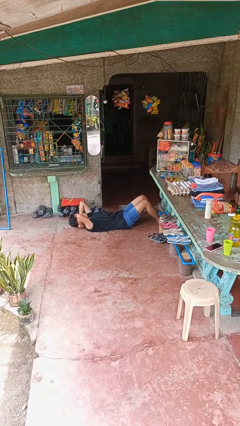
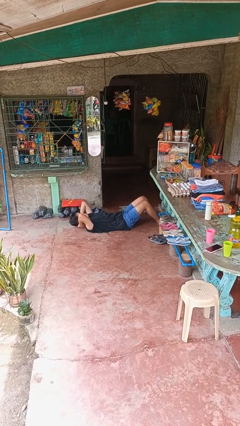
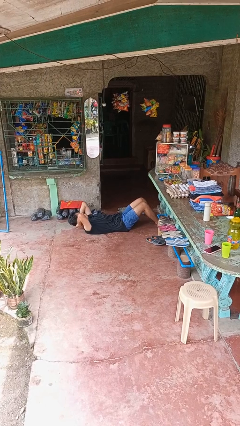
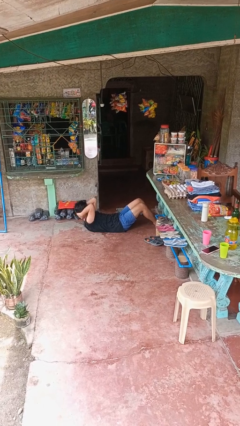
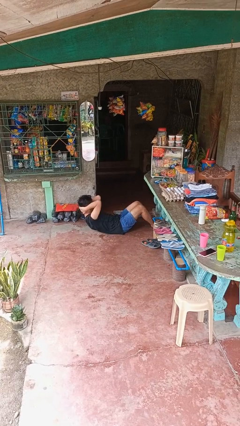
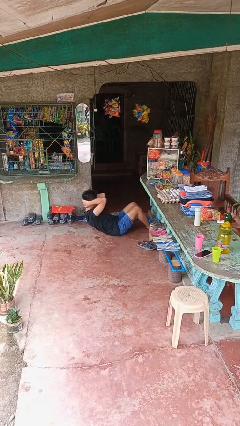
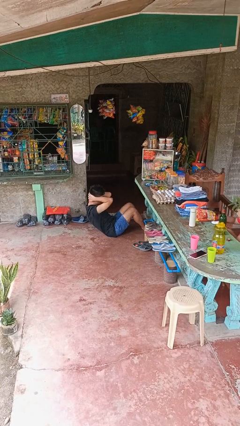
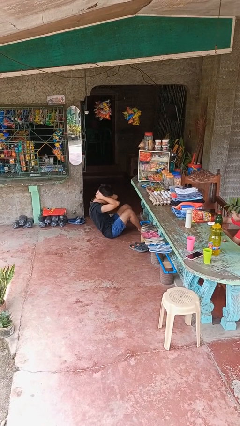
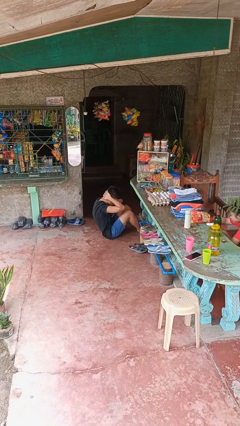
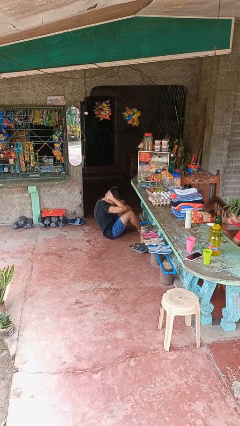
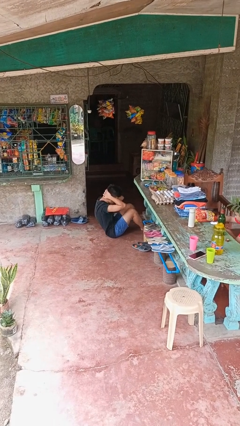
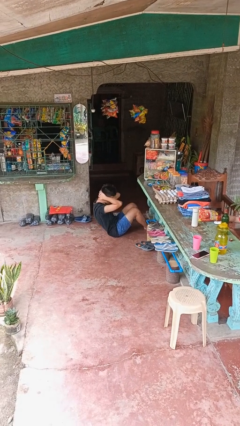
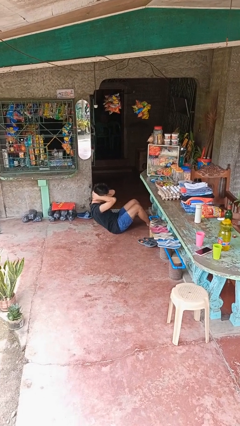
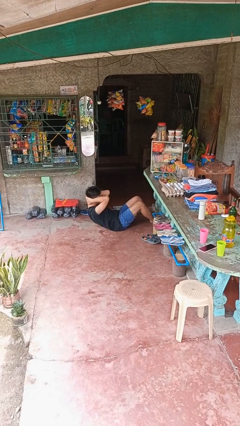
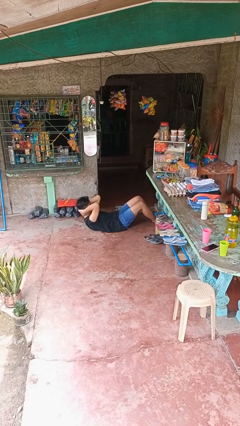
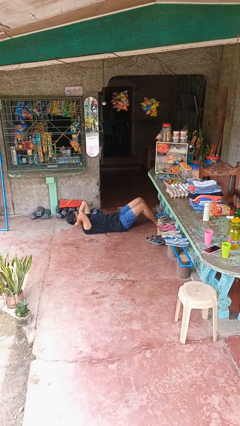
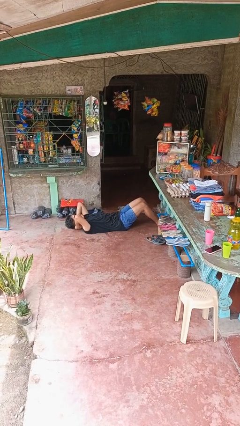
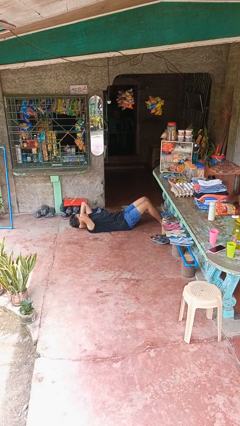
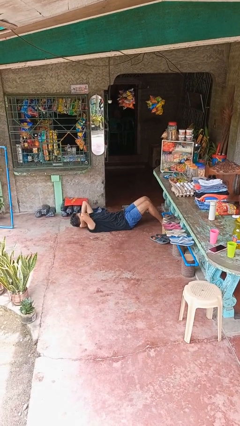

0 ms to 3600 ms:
person exercises with situp

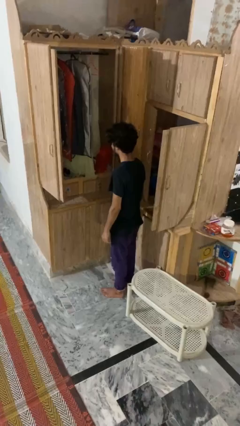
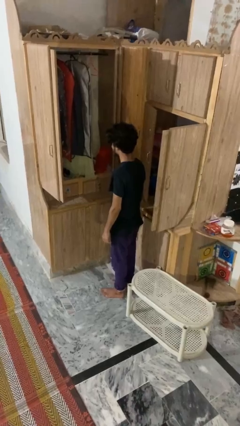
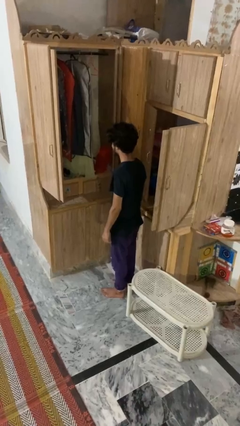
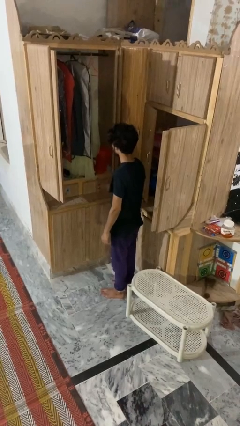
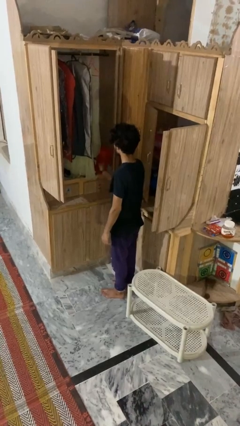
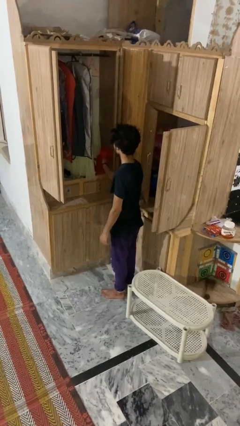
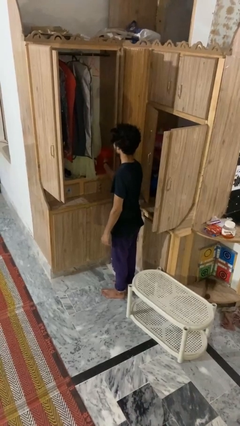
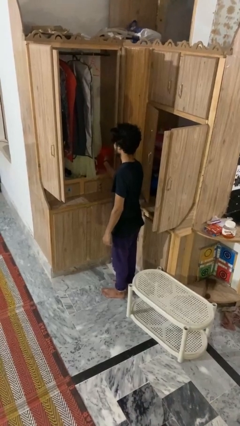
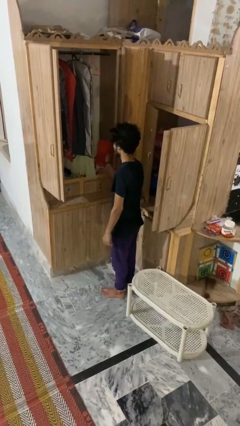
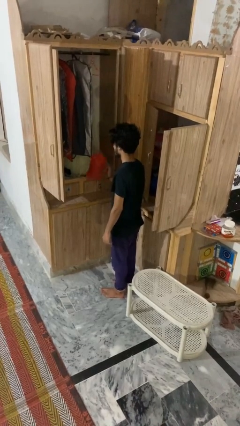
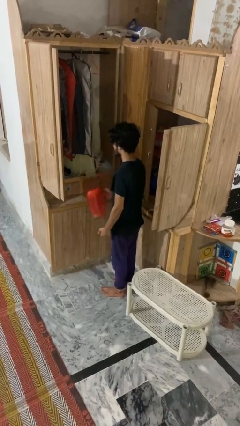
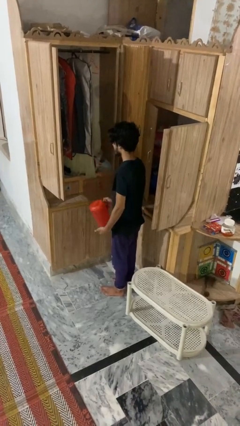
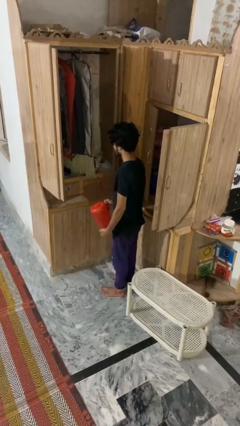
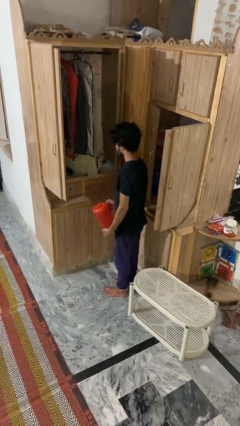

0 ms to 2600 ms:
person picks up object from cabinet

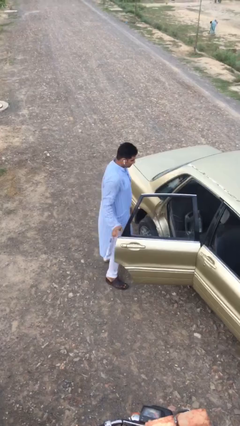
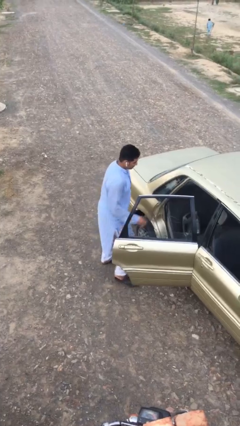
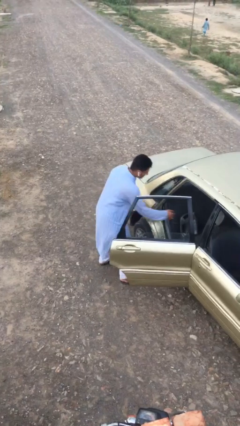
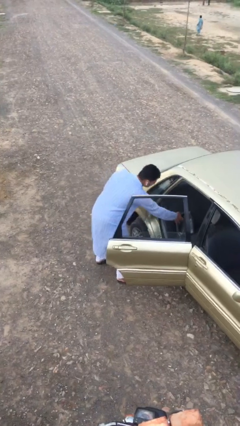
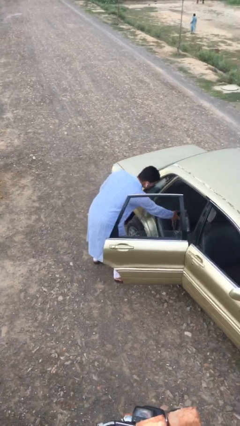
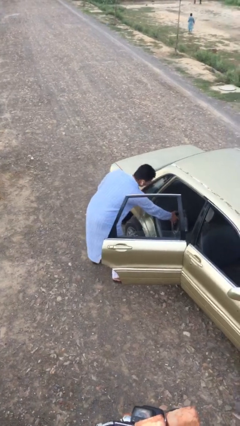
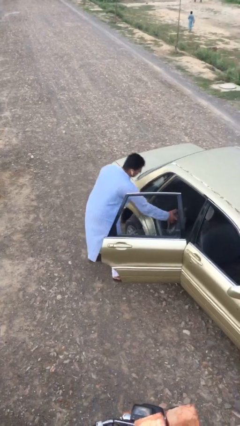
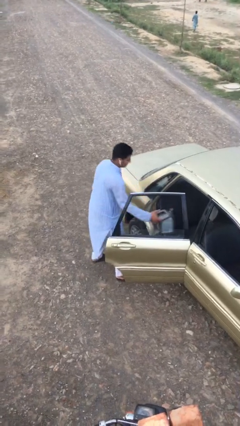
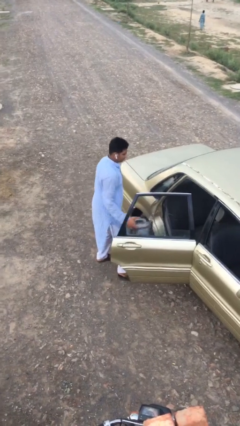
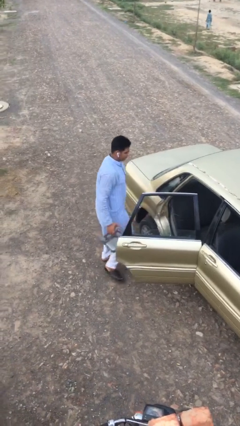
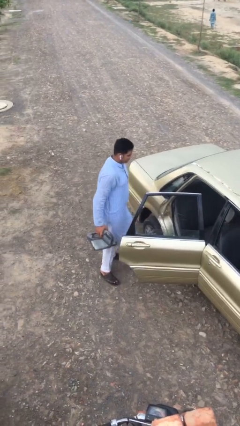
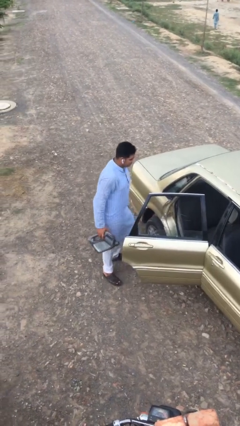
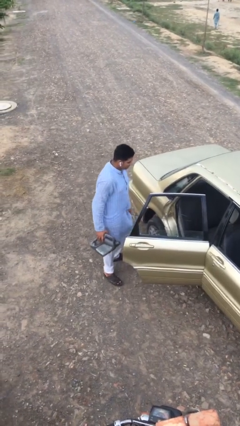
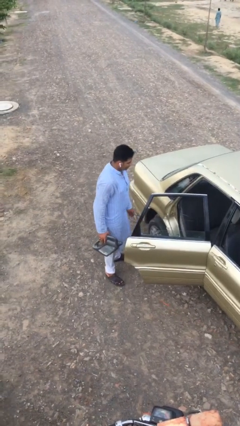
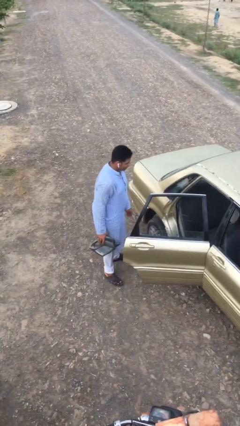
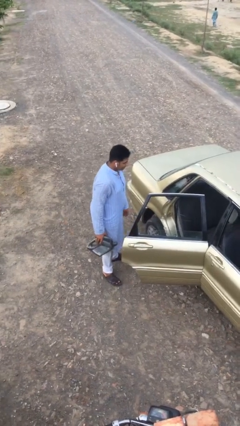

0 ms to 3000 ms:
person unloads car

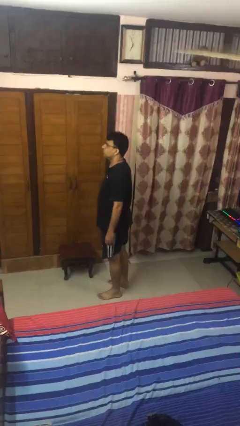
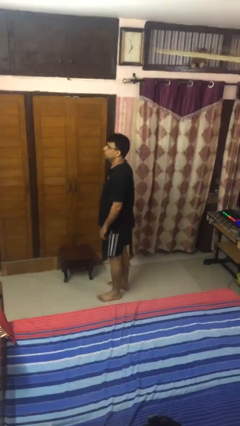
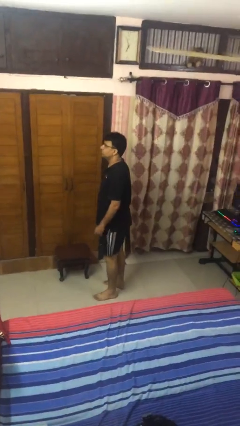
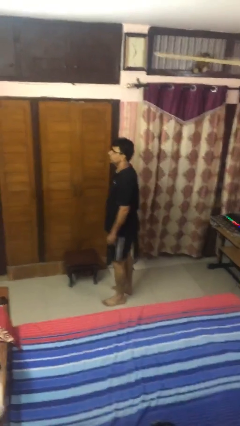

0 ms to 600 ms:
person climbs off table

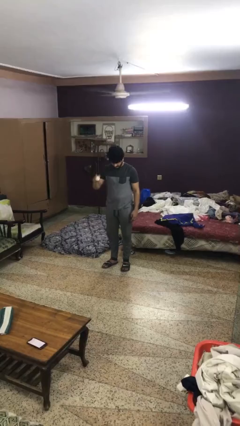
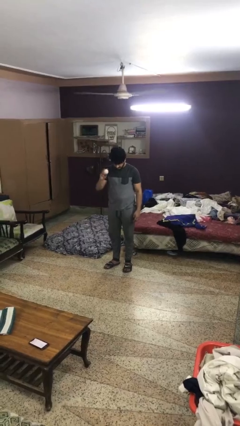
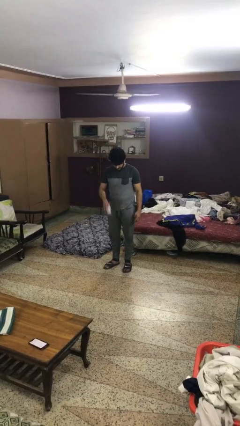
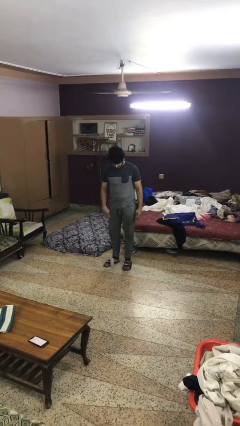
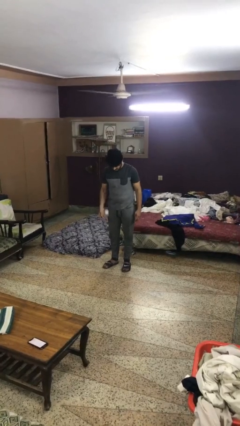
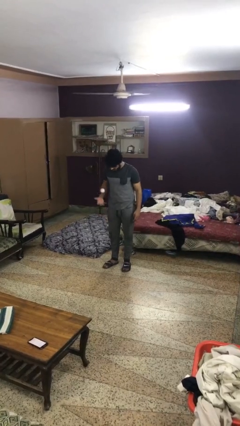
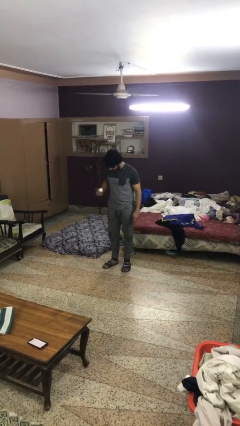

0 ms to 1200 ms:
person bounces ball on floor

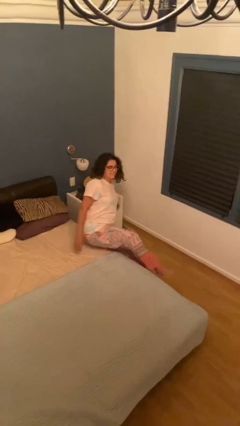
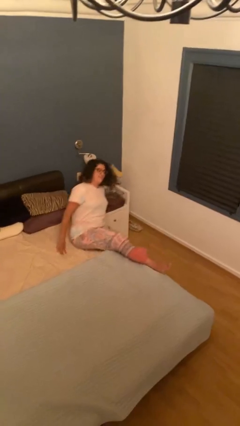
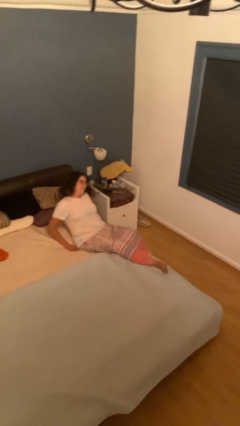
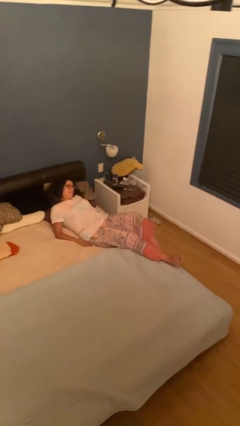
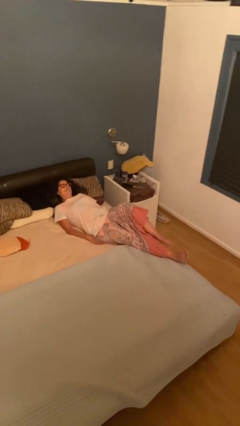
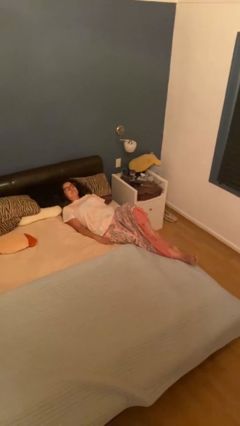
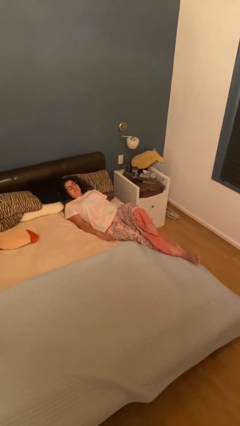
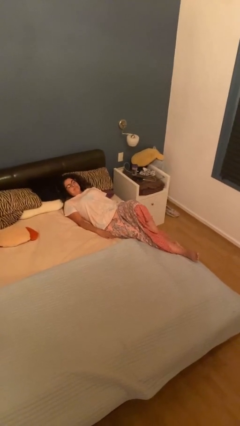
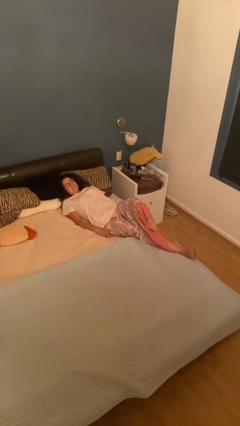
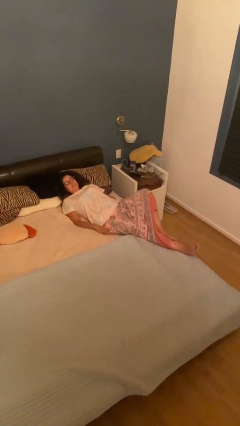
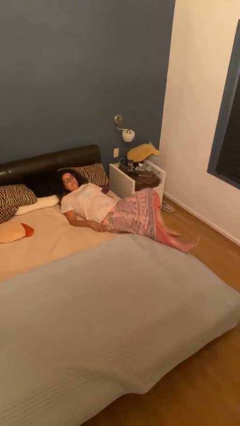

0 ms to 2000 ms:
person lies down on bed

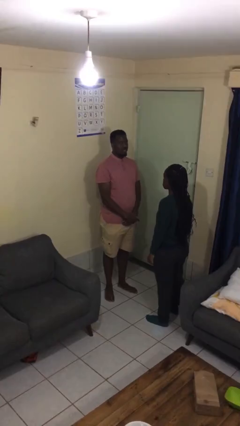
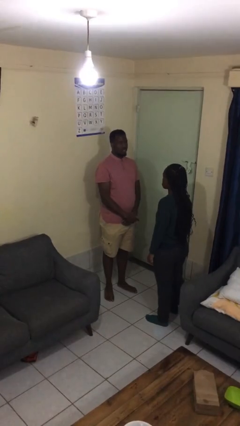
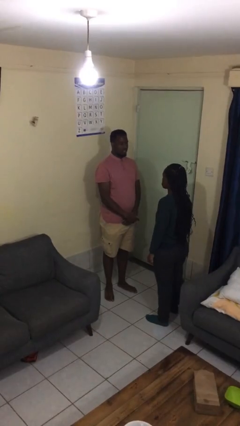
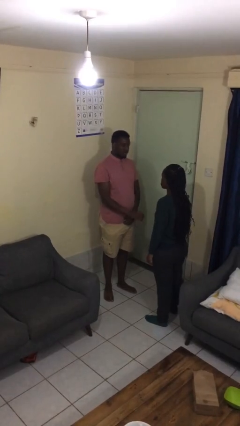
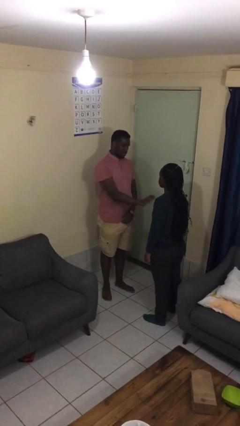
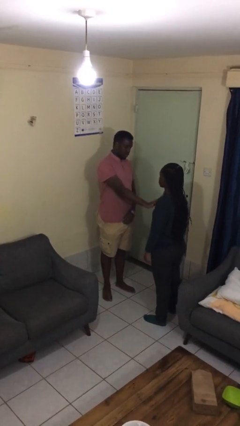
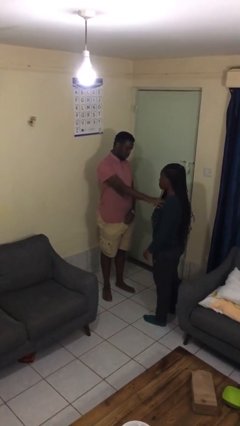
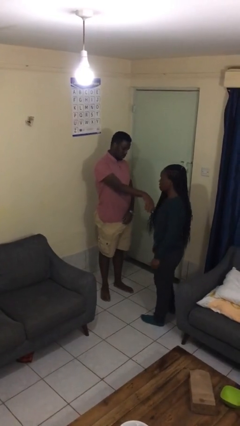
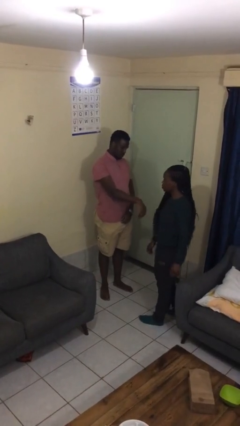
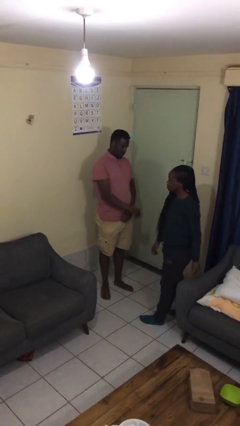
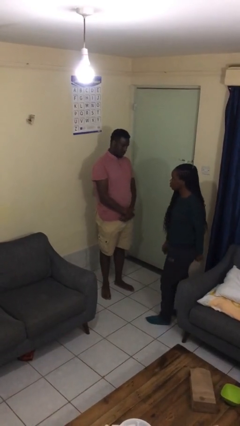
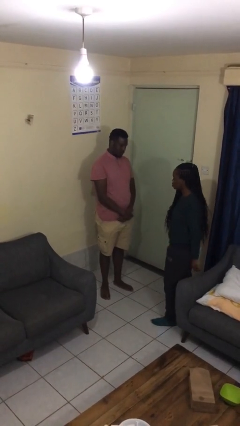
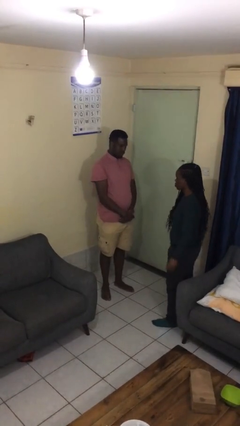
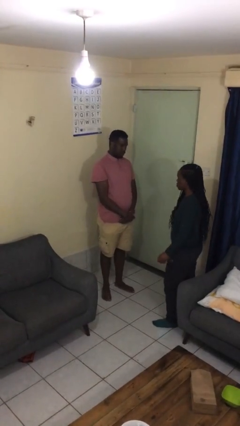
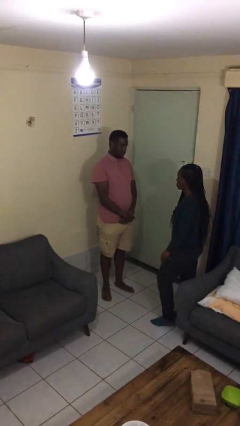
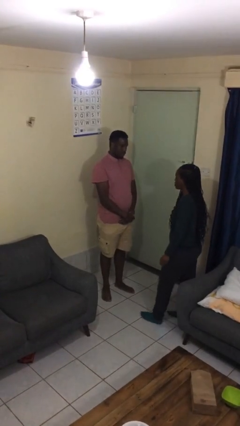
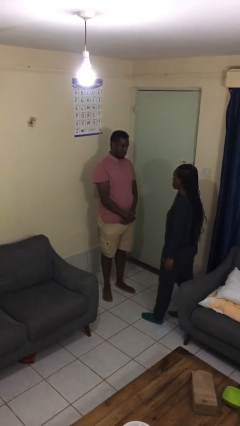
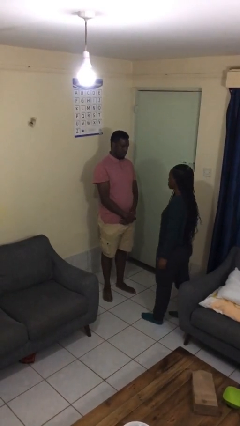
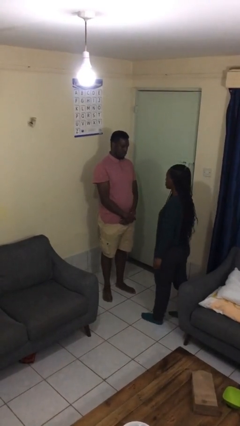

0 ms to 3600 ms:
person shoves person

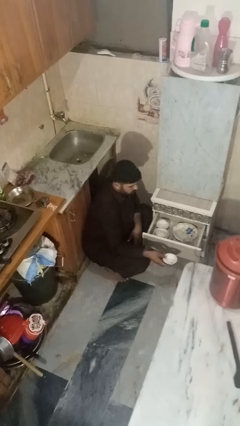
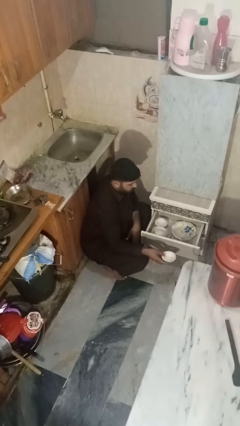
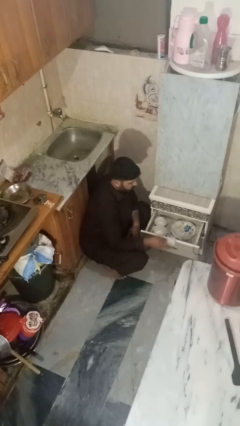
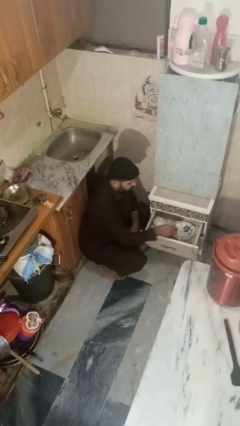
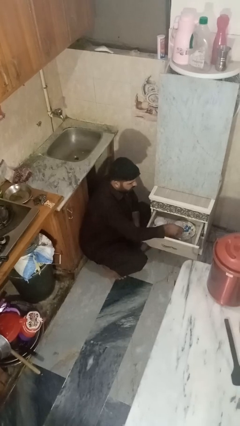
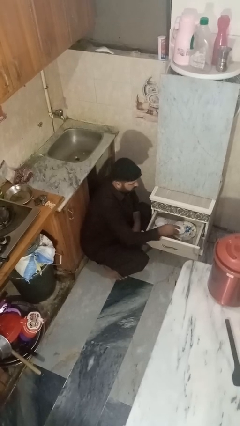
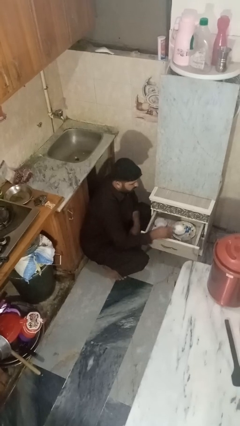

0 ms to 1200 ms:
person puts object into kitchen drawer
